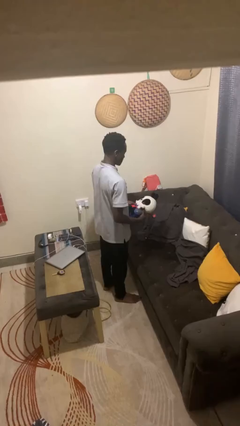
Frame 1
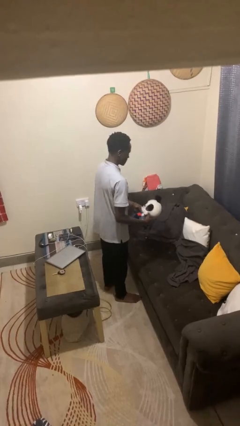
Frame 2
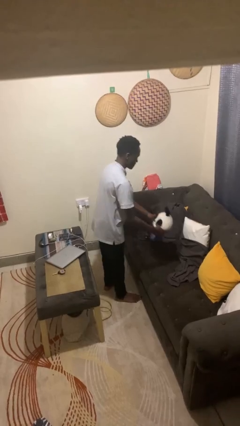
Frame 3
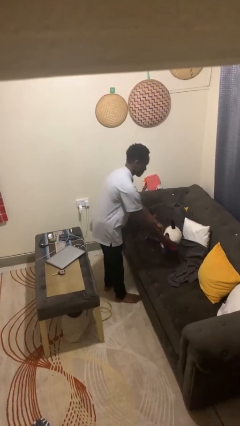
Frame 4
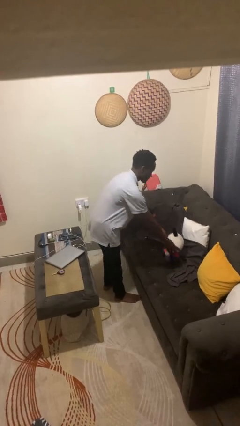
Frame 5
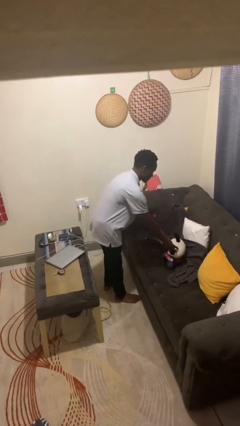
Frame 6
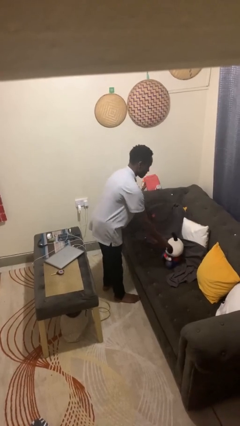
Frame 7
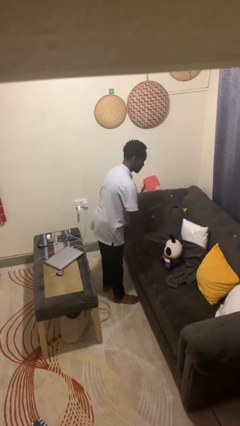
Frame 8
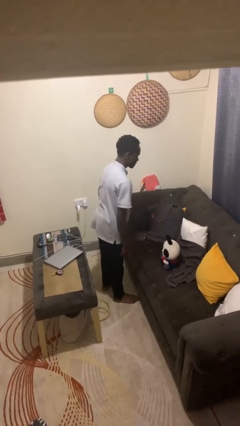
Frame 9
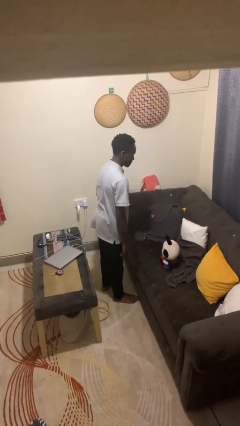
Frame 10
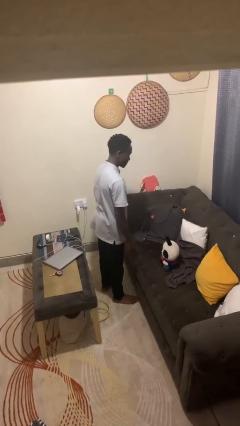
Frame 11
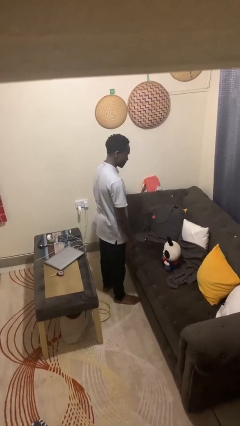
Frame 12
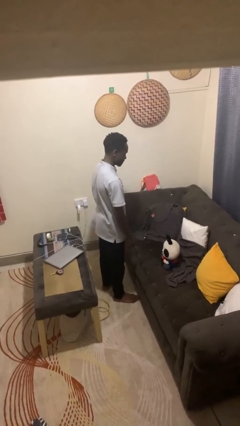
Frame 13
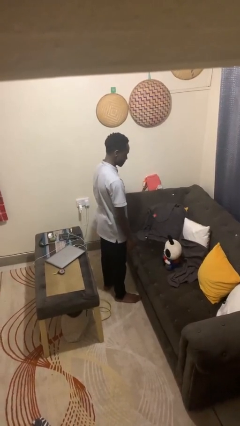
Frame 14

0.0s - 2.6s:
person puts down object on couch

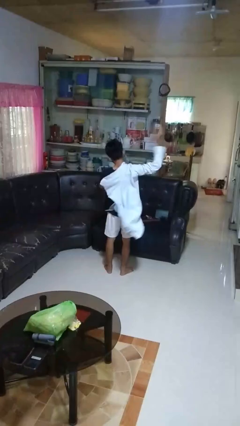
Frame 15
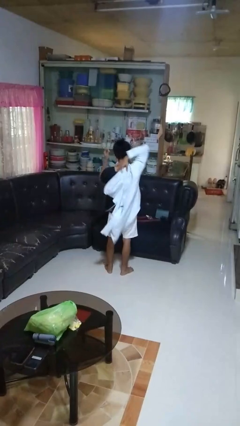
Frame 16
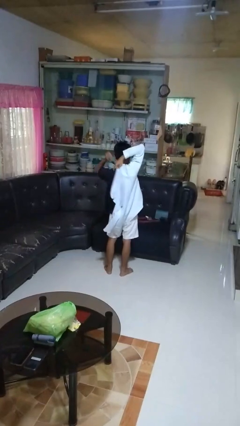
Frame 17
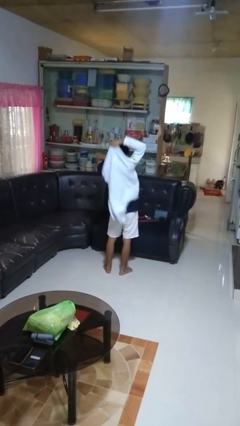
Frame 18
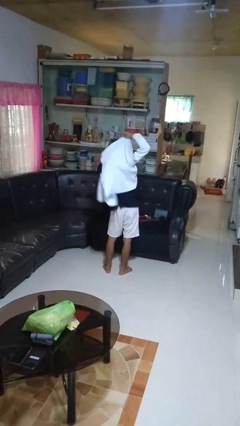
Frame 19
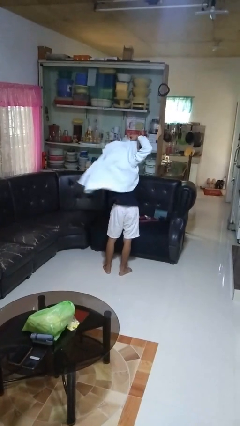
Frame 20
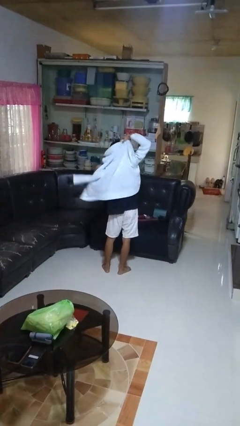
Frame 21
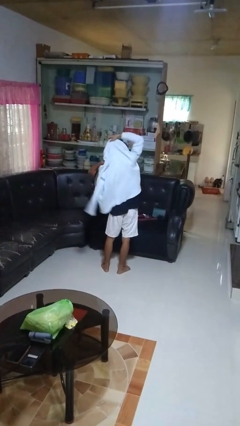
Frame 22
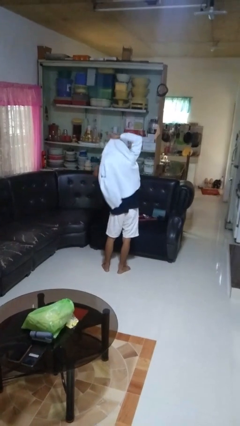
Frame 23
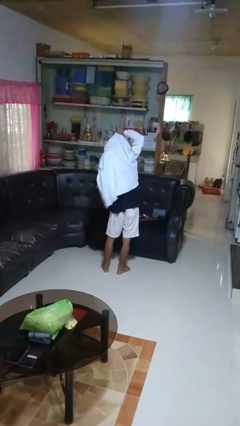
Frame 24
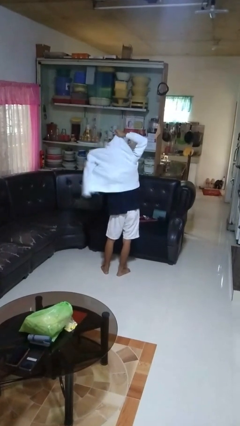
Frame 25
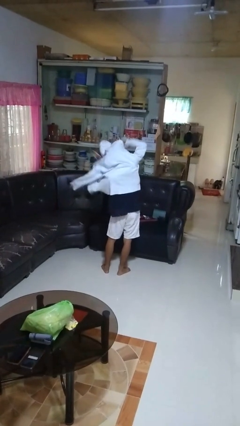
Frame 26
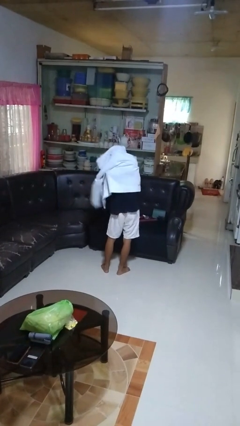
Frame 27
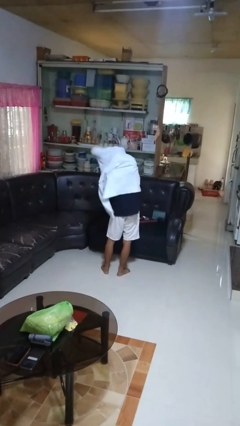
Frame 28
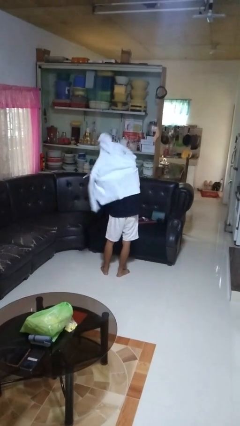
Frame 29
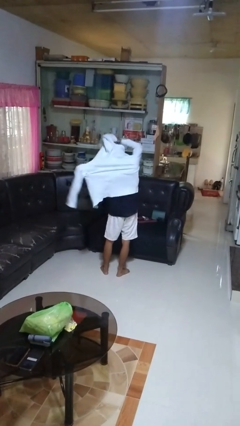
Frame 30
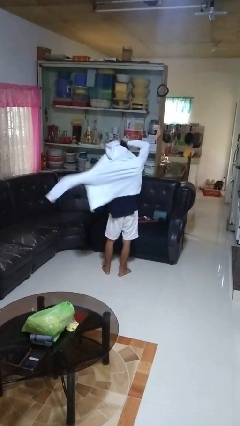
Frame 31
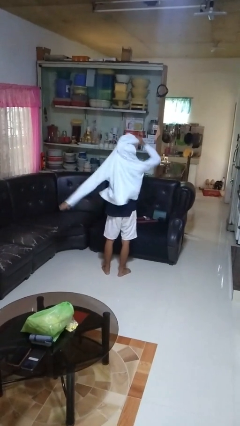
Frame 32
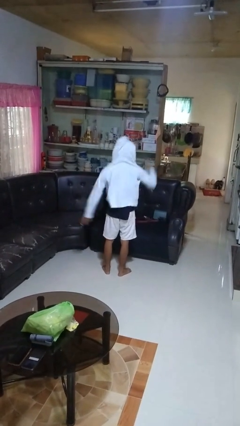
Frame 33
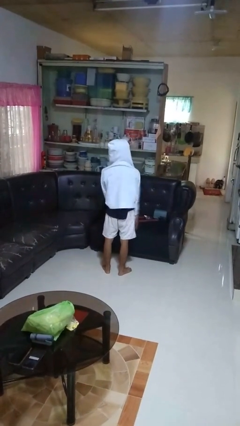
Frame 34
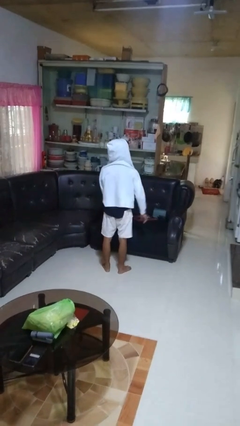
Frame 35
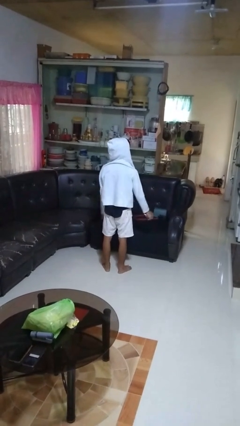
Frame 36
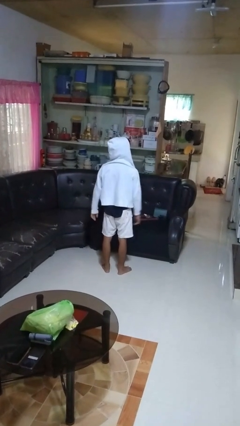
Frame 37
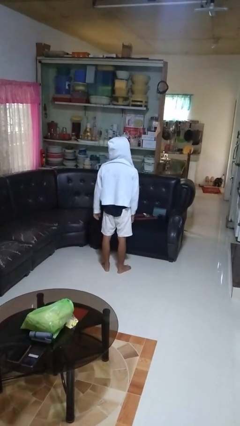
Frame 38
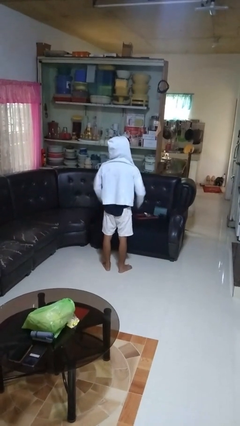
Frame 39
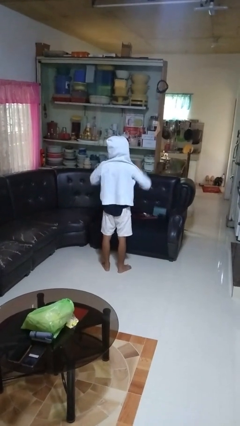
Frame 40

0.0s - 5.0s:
person puts on hoodie

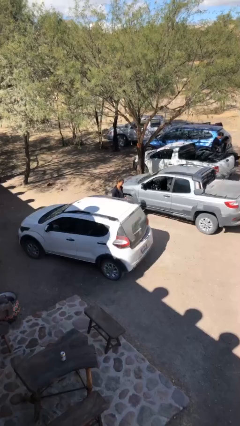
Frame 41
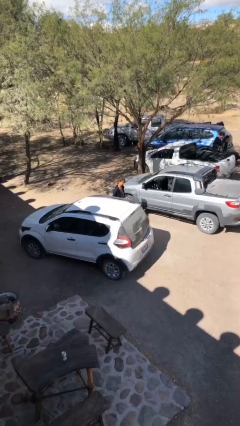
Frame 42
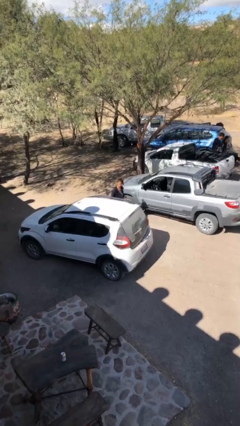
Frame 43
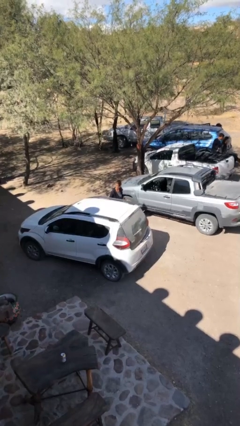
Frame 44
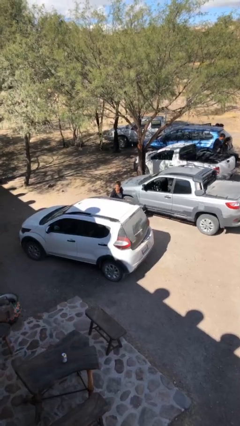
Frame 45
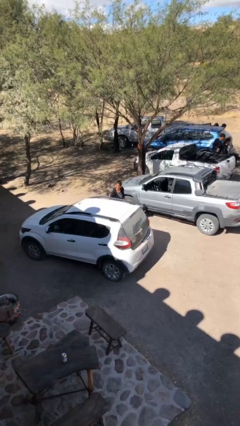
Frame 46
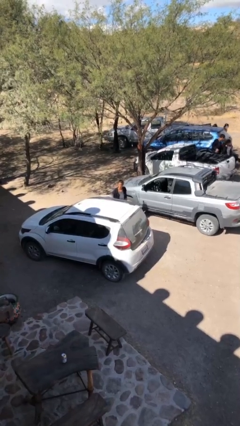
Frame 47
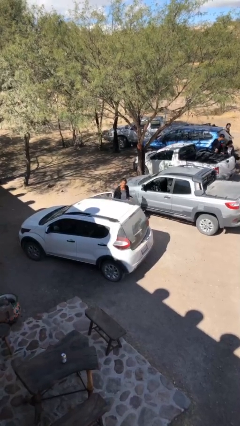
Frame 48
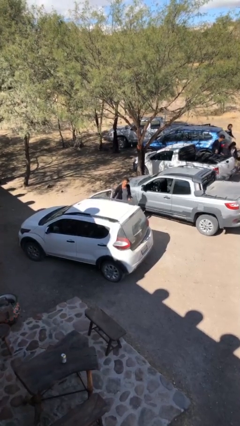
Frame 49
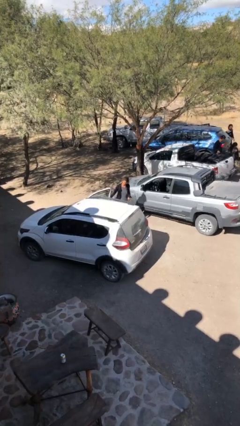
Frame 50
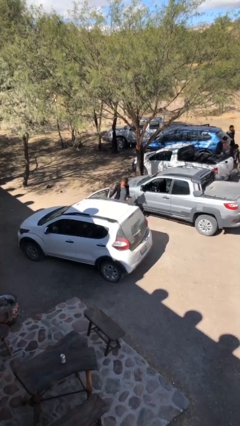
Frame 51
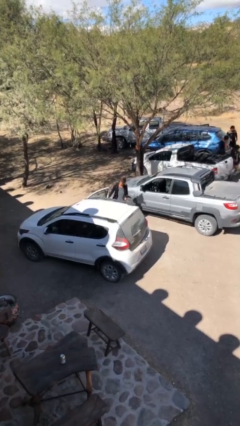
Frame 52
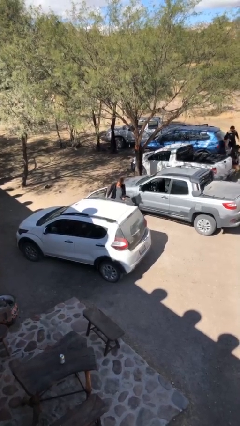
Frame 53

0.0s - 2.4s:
person opens car door

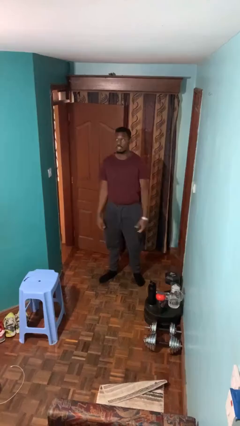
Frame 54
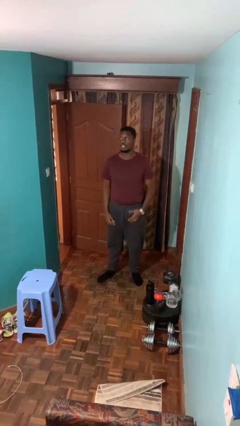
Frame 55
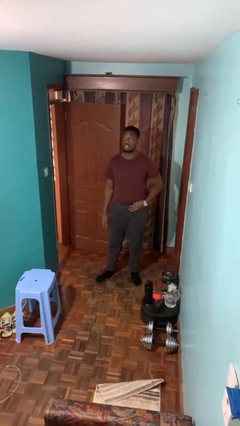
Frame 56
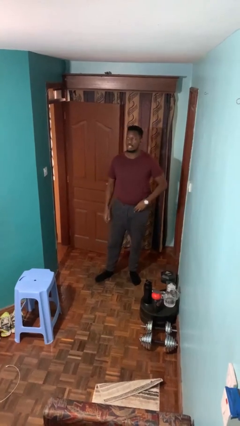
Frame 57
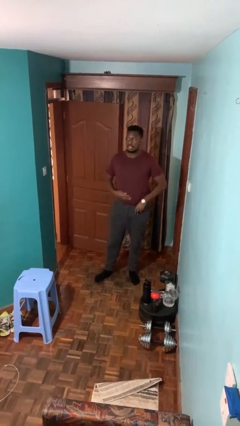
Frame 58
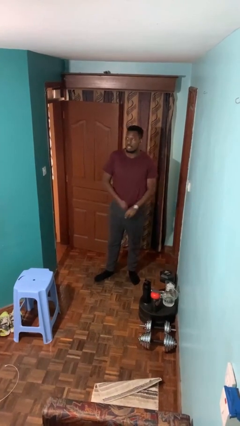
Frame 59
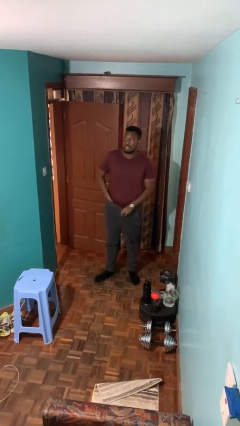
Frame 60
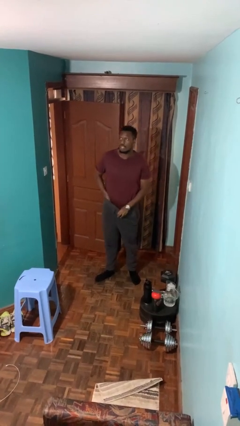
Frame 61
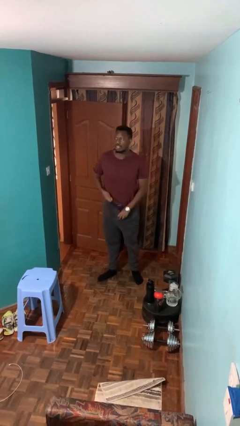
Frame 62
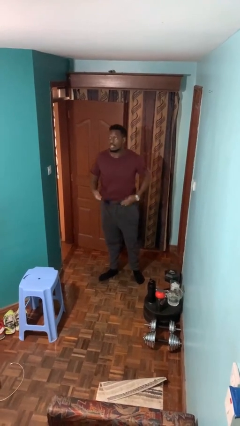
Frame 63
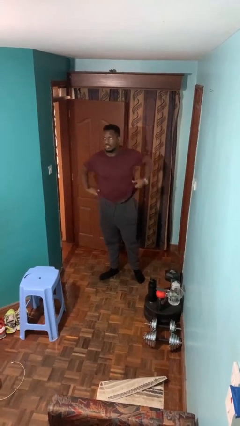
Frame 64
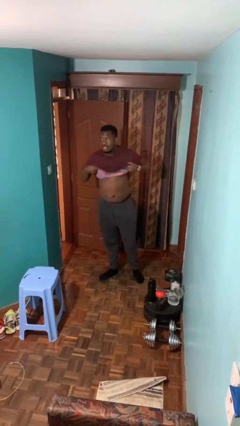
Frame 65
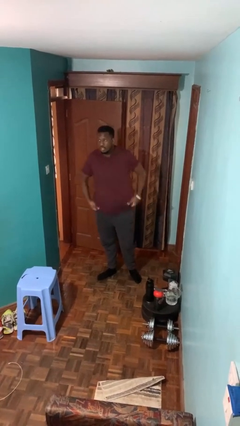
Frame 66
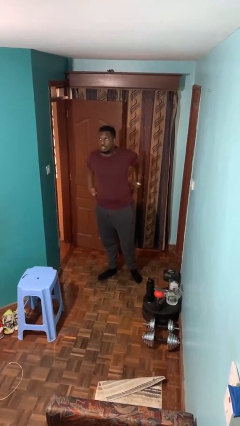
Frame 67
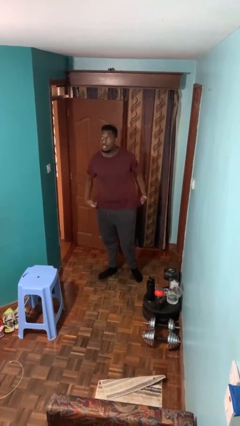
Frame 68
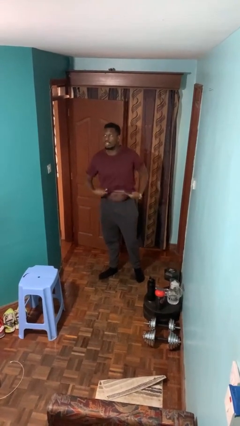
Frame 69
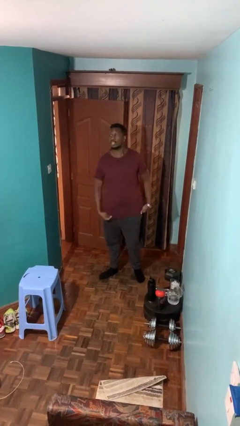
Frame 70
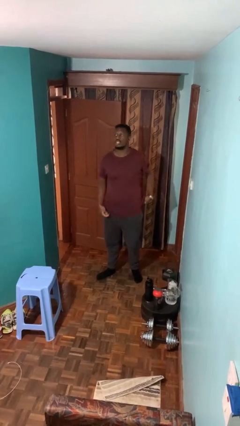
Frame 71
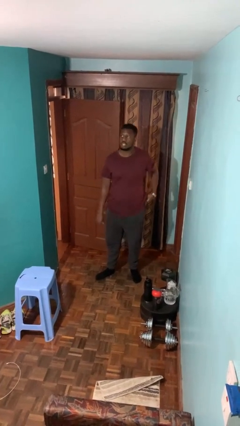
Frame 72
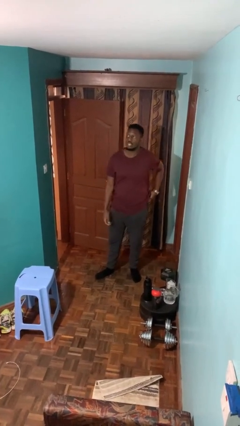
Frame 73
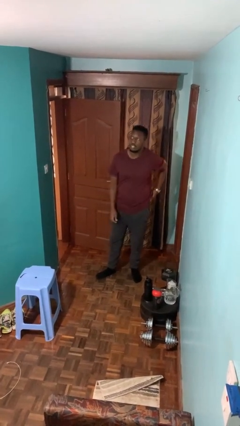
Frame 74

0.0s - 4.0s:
person untucks shirt

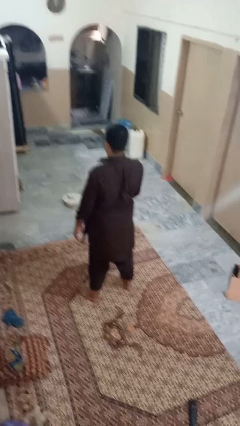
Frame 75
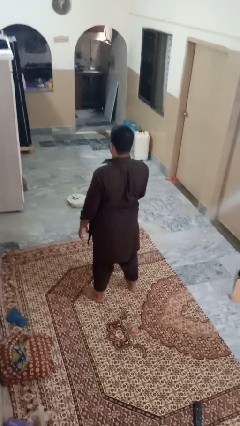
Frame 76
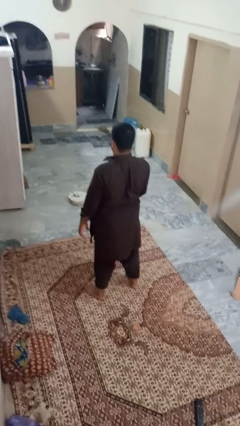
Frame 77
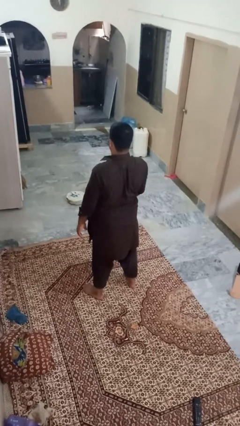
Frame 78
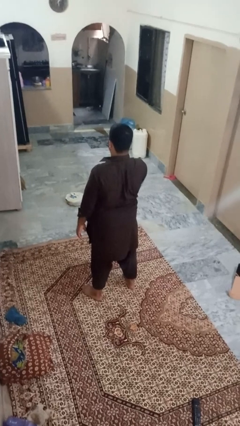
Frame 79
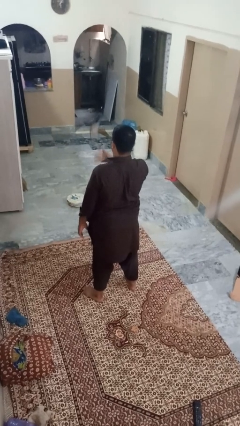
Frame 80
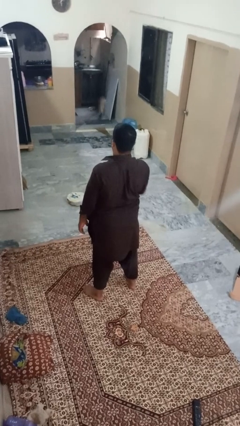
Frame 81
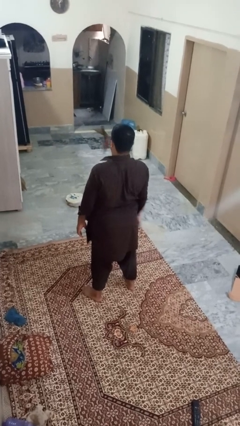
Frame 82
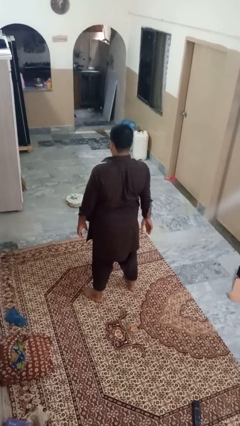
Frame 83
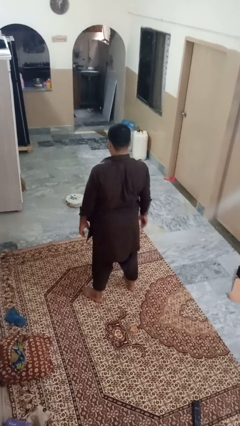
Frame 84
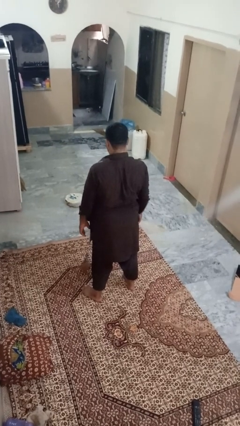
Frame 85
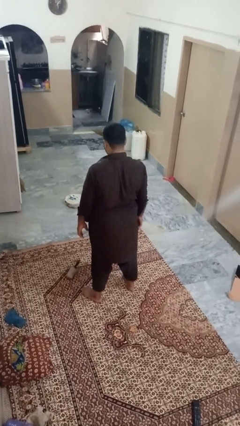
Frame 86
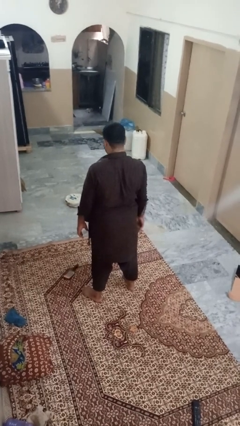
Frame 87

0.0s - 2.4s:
person throws object into air

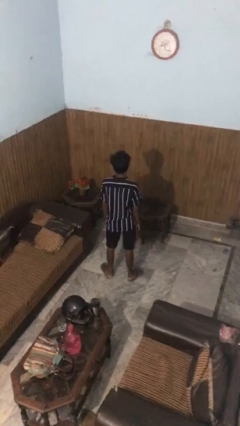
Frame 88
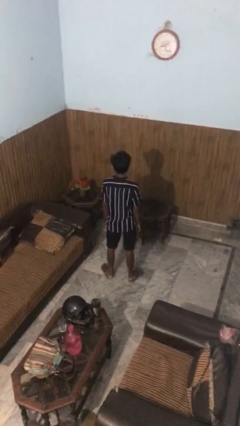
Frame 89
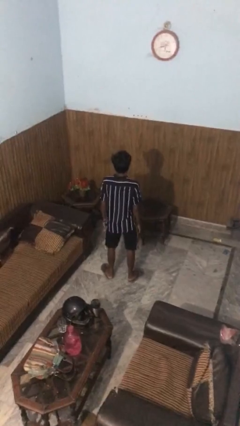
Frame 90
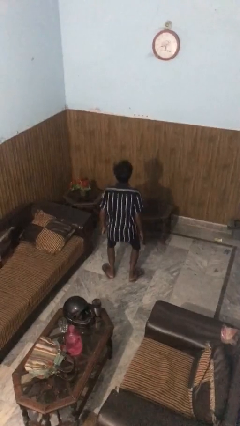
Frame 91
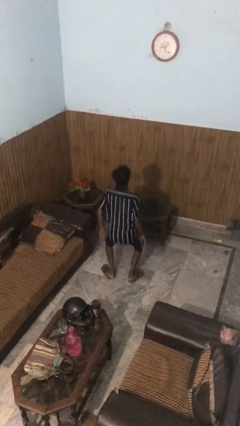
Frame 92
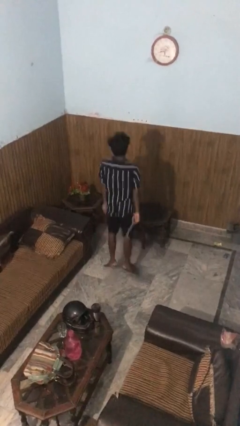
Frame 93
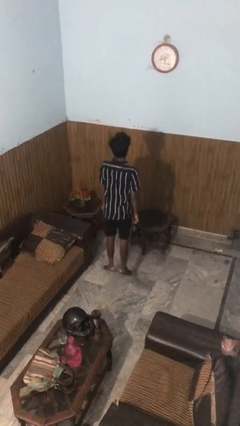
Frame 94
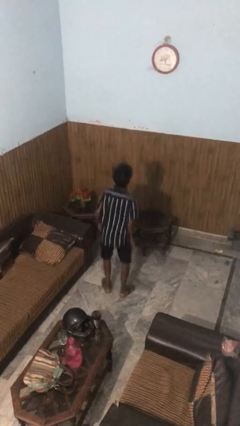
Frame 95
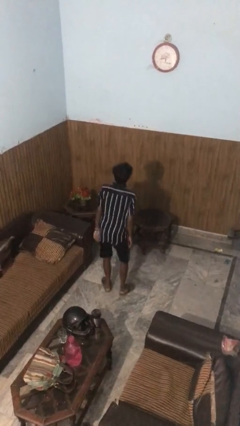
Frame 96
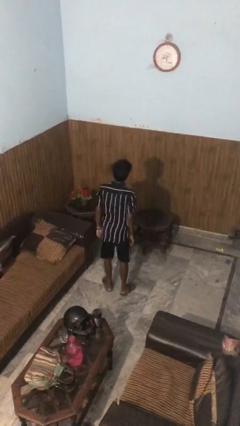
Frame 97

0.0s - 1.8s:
person jumps
